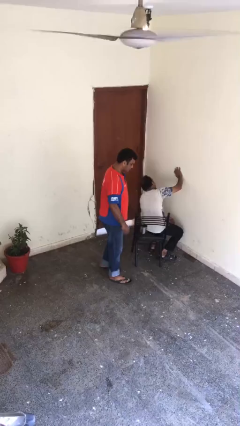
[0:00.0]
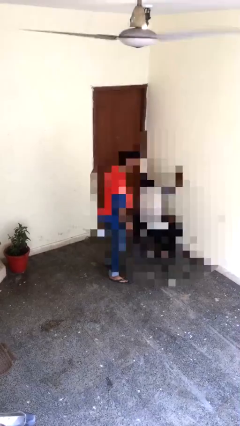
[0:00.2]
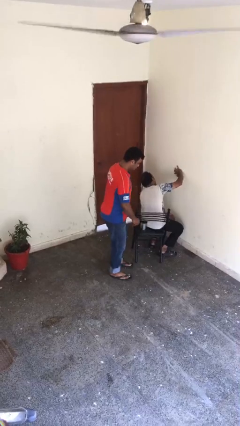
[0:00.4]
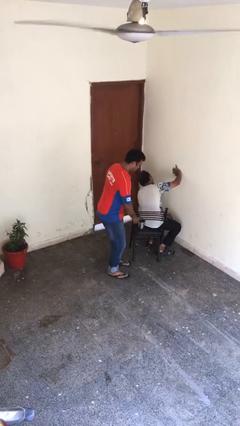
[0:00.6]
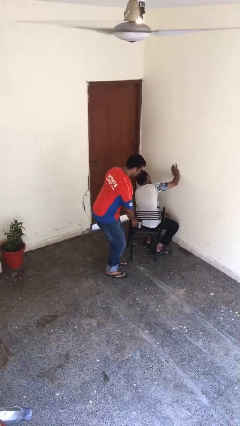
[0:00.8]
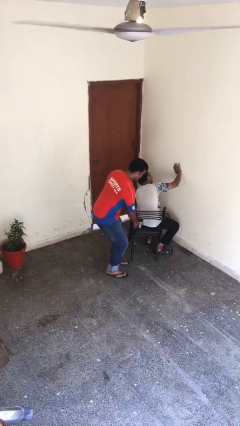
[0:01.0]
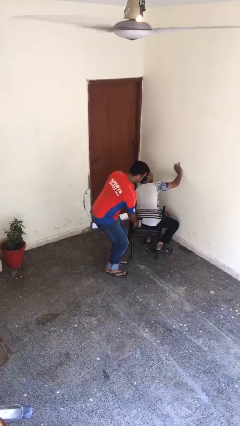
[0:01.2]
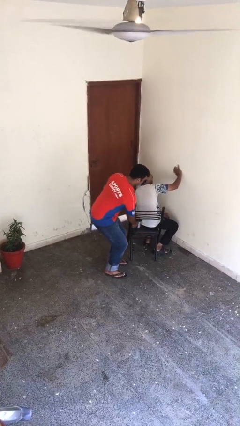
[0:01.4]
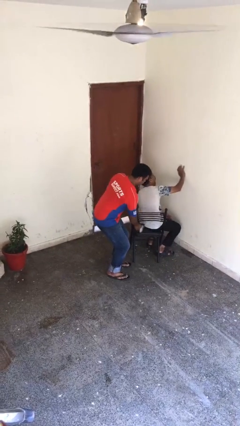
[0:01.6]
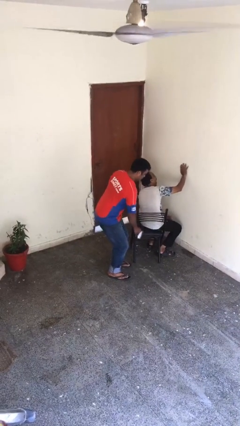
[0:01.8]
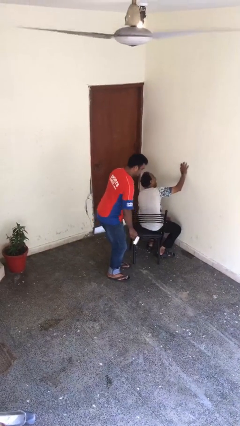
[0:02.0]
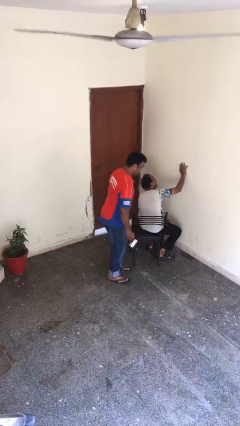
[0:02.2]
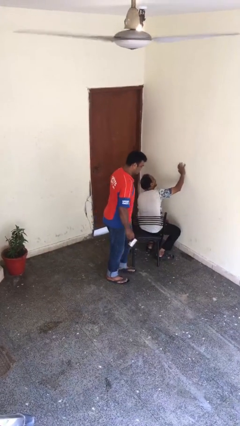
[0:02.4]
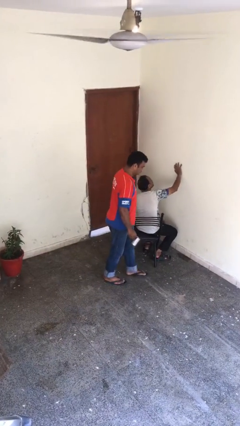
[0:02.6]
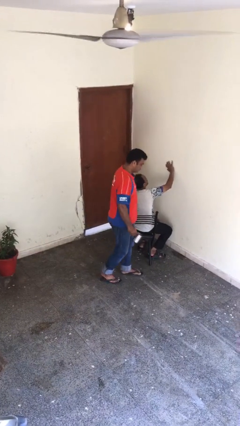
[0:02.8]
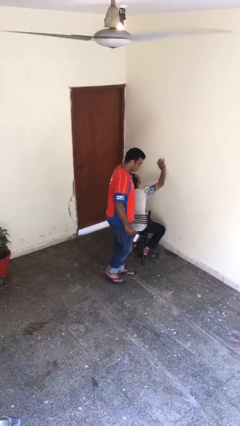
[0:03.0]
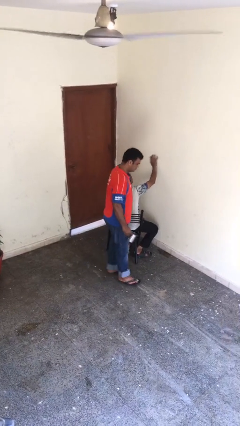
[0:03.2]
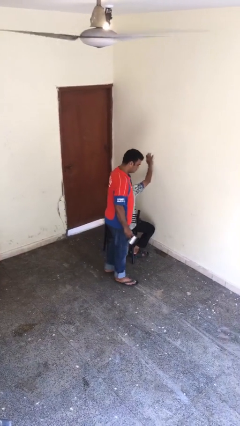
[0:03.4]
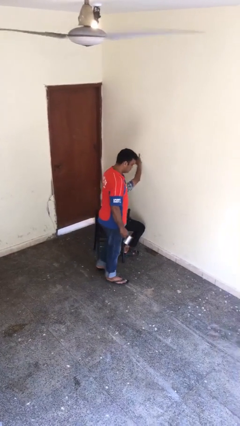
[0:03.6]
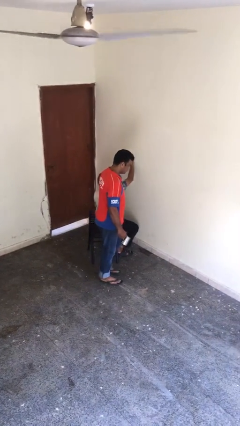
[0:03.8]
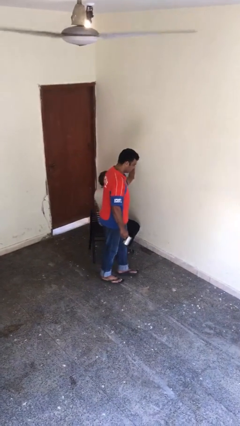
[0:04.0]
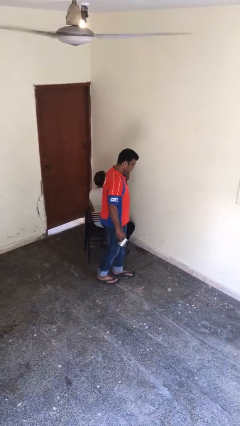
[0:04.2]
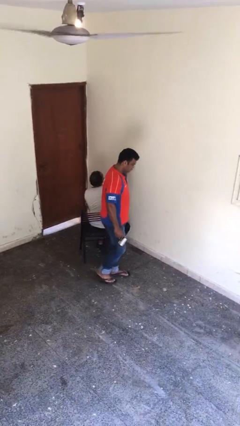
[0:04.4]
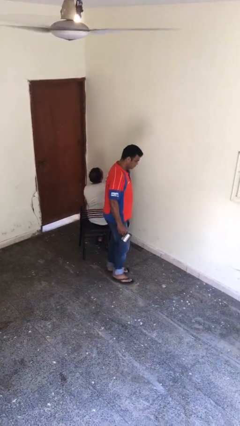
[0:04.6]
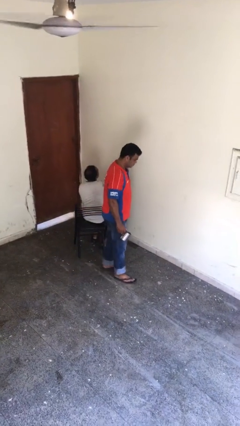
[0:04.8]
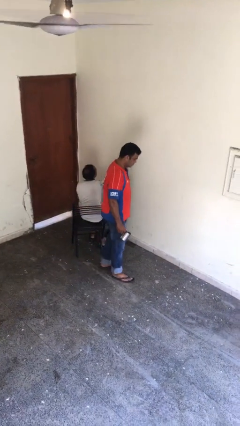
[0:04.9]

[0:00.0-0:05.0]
person steals object from person

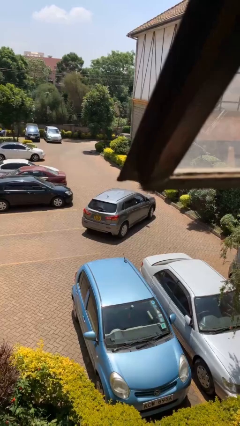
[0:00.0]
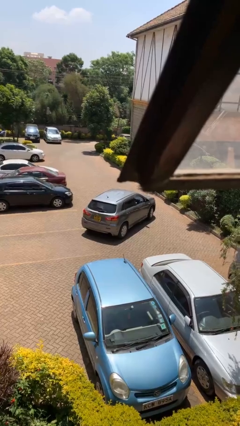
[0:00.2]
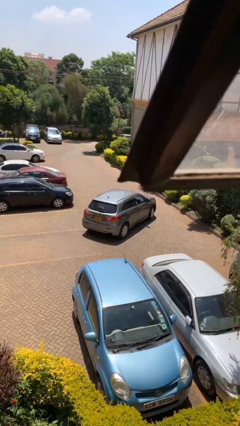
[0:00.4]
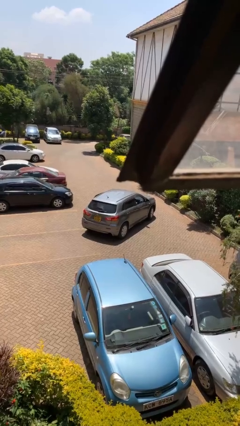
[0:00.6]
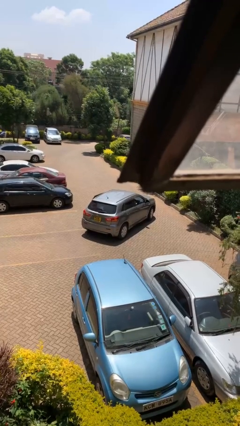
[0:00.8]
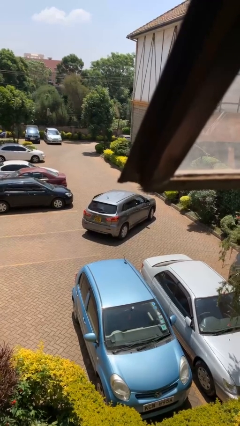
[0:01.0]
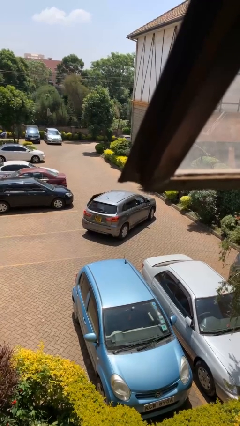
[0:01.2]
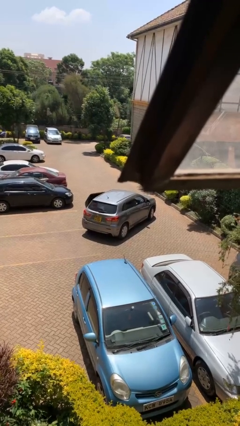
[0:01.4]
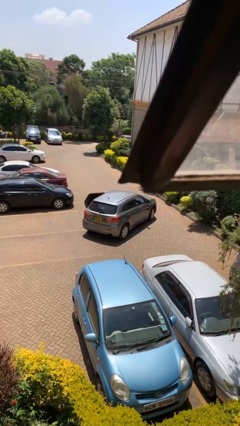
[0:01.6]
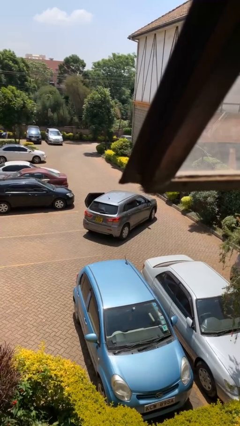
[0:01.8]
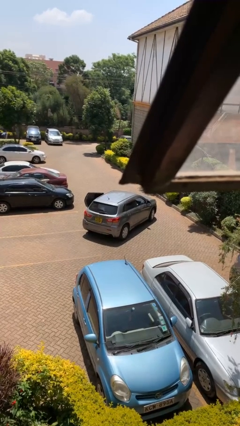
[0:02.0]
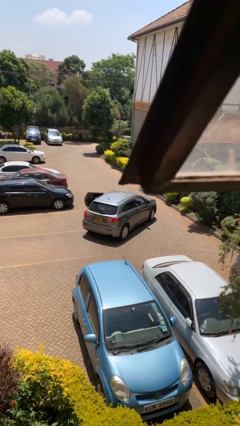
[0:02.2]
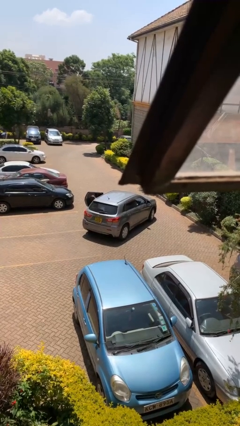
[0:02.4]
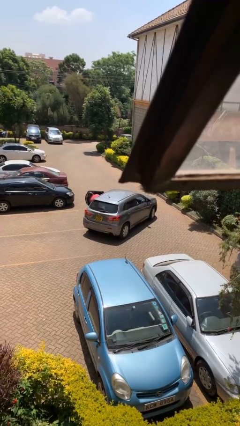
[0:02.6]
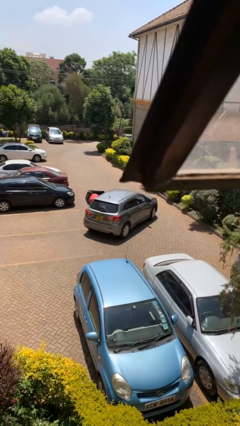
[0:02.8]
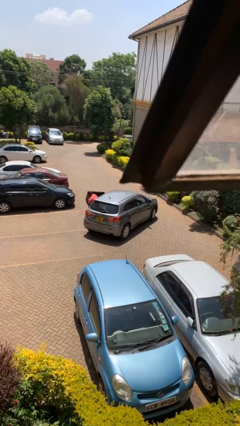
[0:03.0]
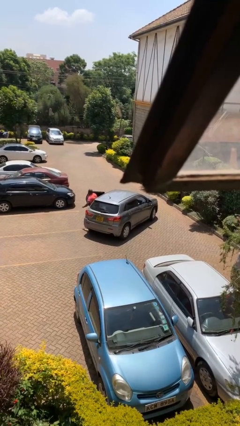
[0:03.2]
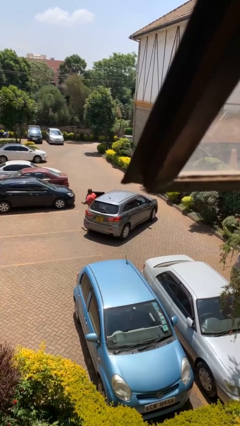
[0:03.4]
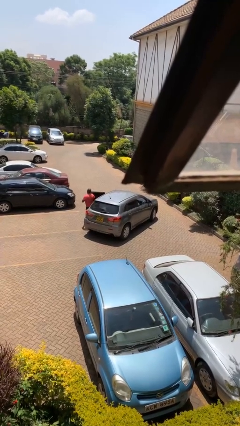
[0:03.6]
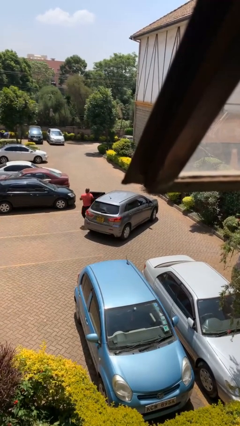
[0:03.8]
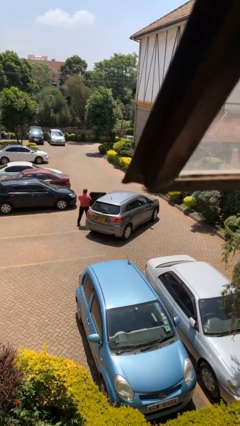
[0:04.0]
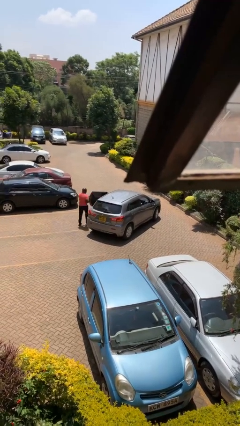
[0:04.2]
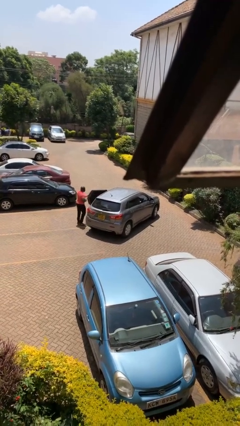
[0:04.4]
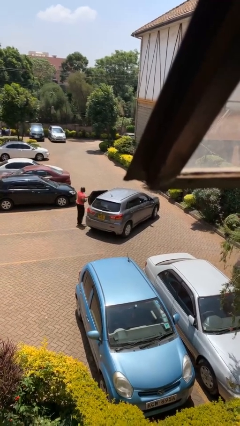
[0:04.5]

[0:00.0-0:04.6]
car drops off person

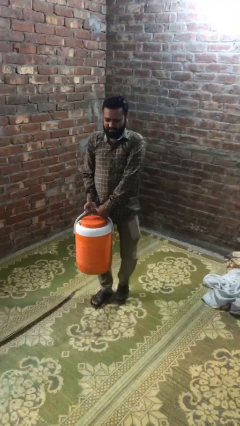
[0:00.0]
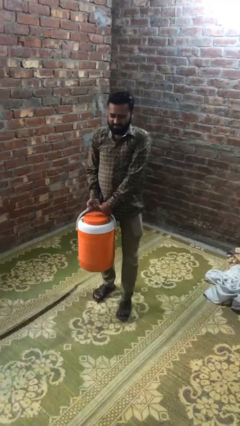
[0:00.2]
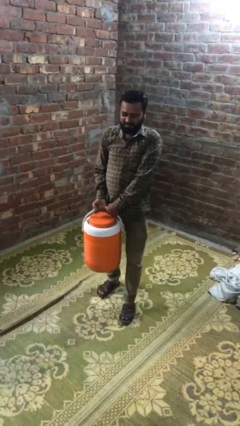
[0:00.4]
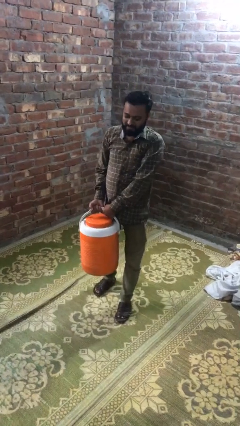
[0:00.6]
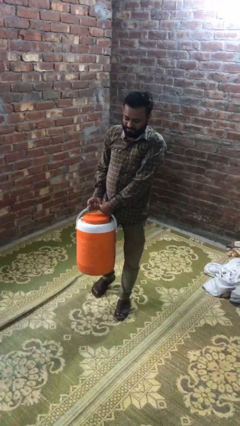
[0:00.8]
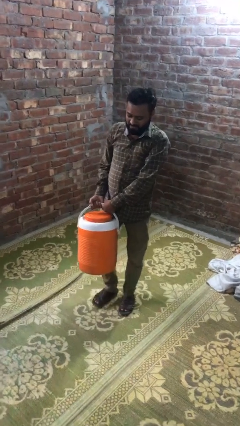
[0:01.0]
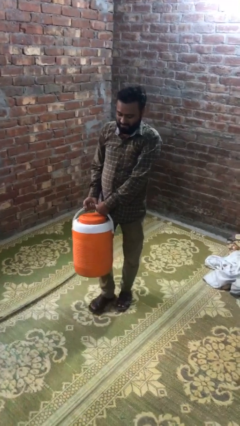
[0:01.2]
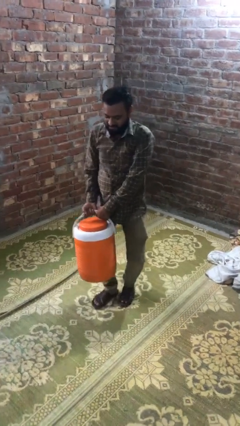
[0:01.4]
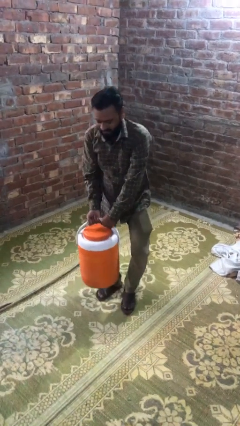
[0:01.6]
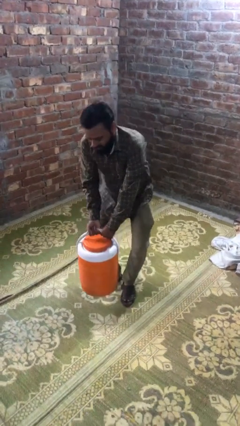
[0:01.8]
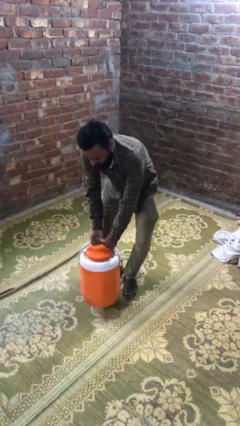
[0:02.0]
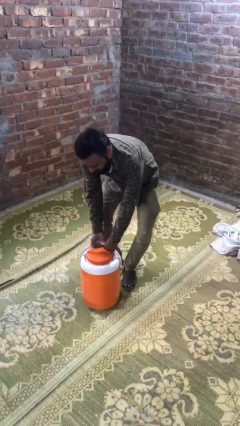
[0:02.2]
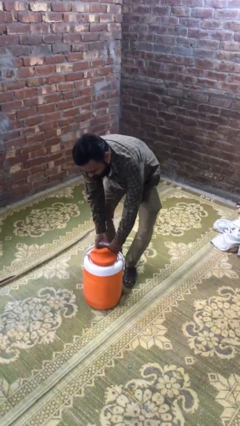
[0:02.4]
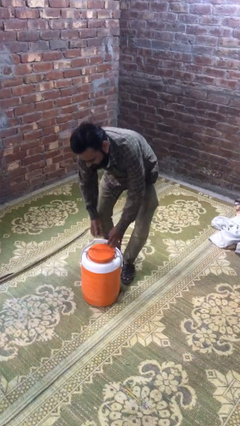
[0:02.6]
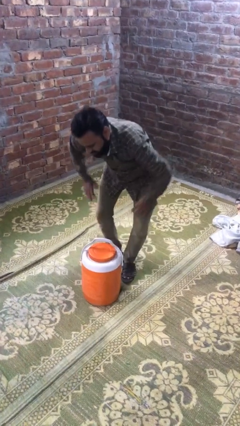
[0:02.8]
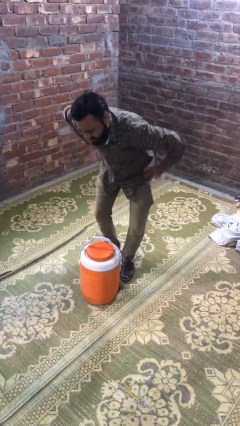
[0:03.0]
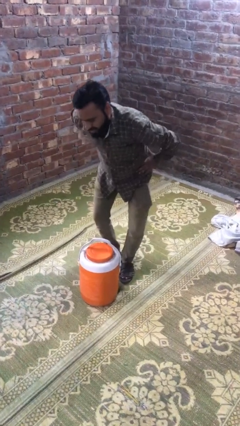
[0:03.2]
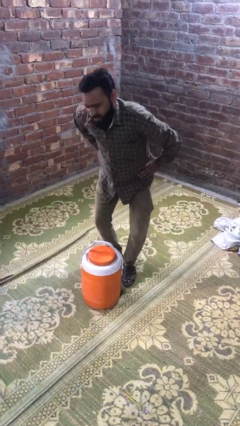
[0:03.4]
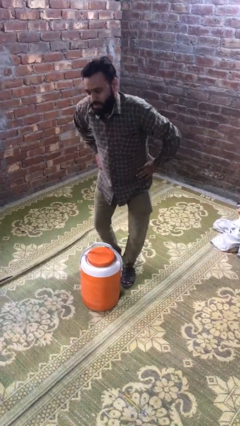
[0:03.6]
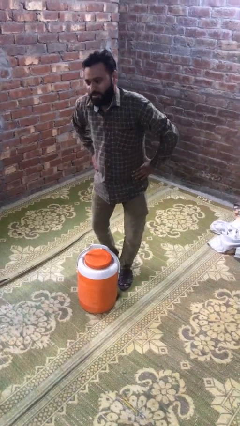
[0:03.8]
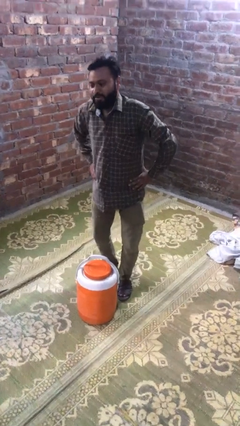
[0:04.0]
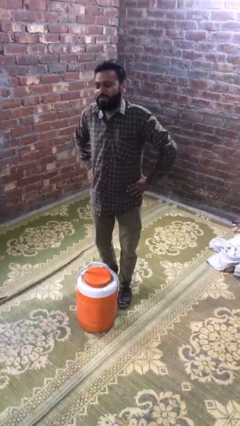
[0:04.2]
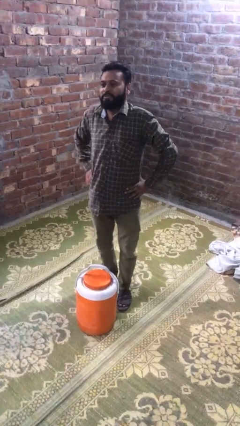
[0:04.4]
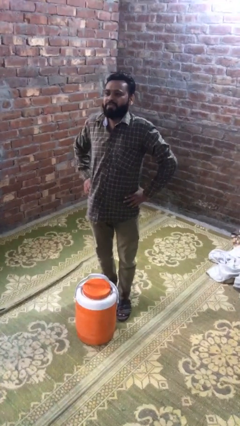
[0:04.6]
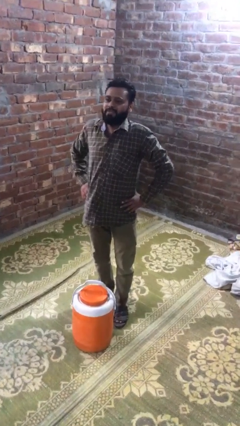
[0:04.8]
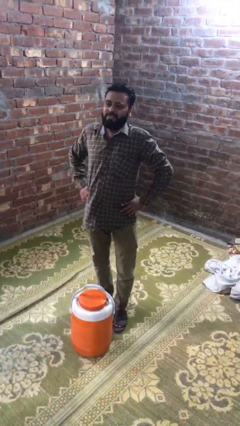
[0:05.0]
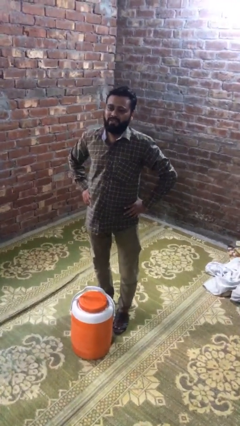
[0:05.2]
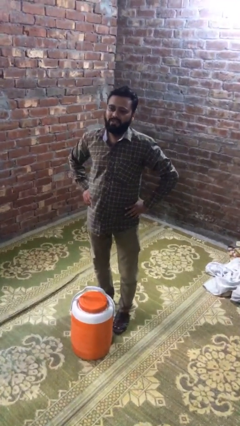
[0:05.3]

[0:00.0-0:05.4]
person puts down object on floor

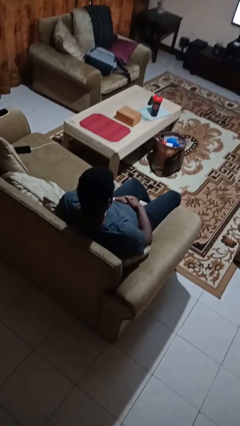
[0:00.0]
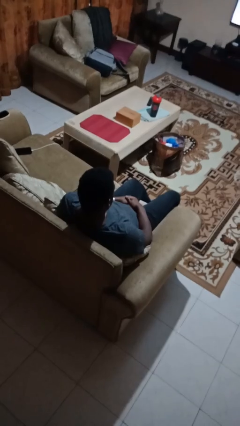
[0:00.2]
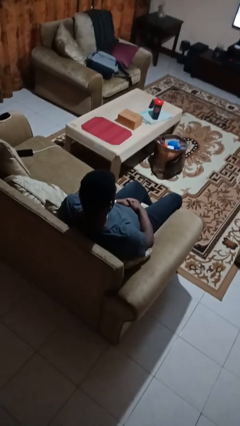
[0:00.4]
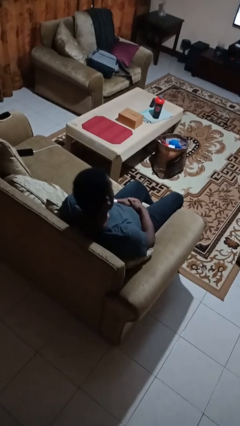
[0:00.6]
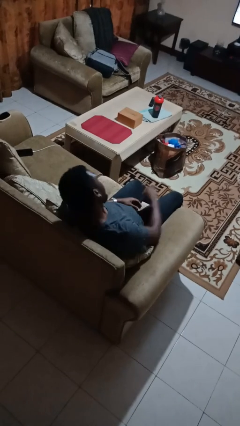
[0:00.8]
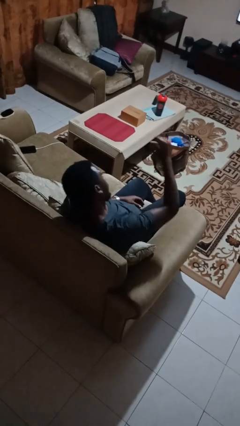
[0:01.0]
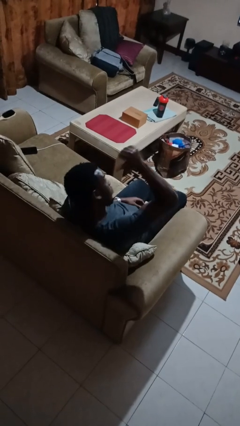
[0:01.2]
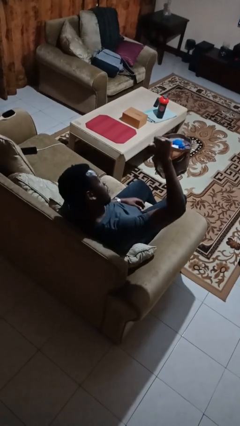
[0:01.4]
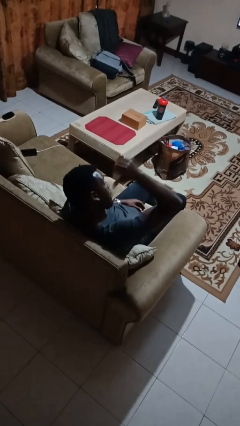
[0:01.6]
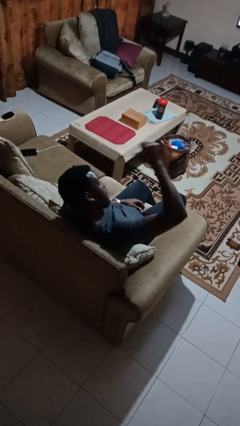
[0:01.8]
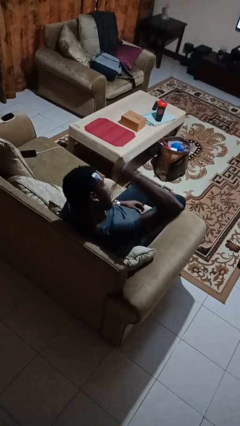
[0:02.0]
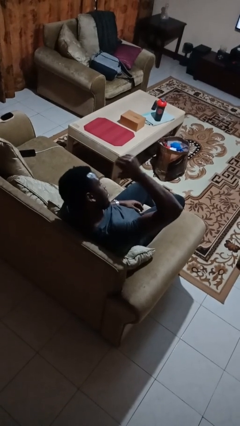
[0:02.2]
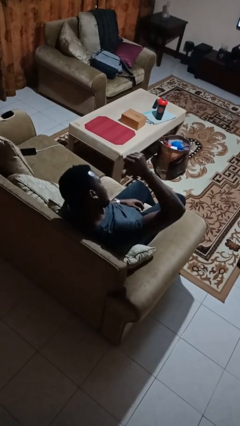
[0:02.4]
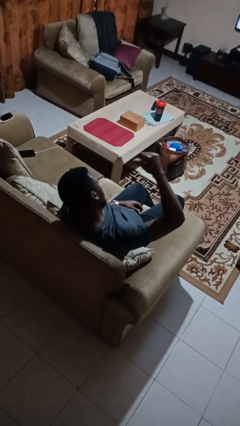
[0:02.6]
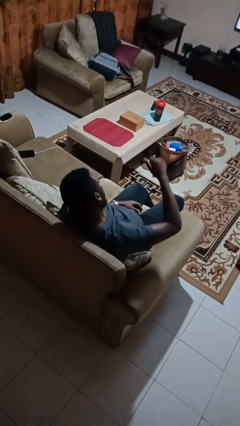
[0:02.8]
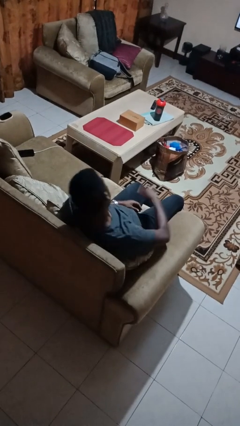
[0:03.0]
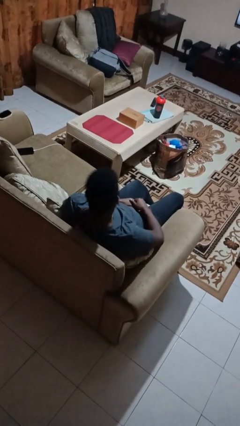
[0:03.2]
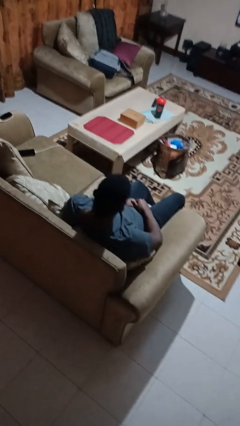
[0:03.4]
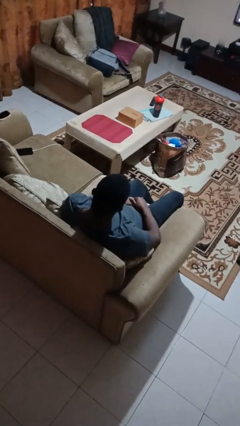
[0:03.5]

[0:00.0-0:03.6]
person gestures behind me
